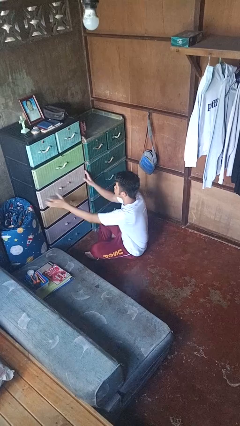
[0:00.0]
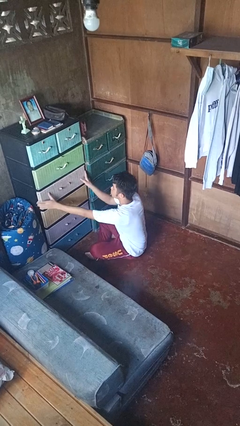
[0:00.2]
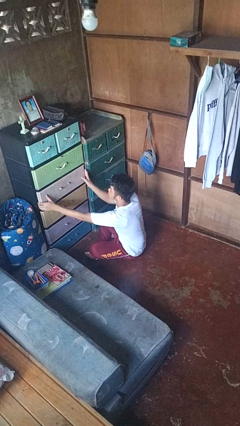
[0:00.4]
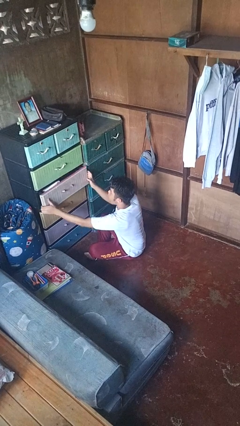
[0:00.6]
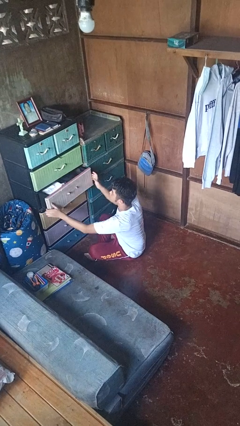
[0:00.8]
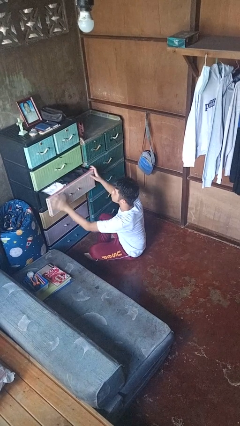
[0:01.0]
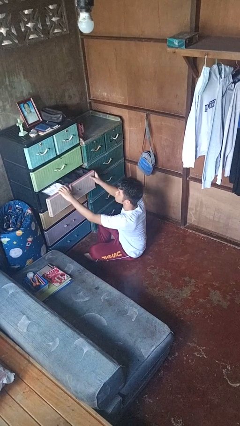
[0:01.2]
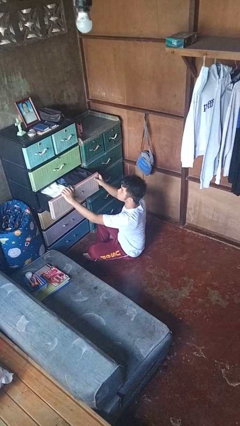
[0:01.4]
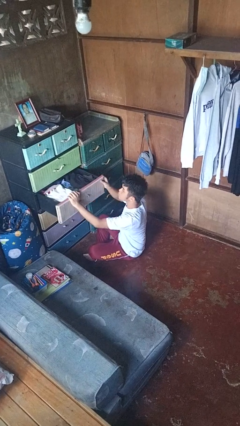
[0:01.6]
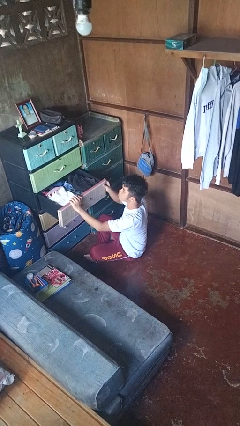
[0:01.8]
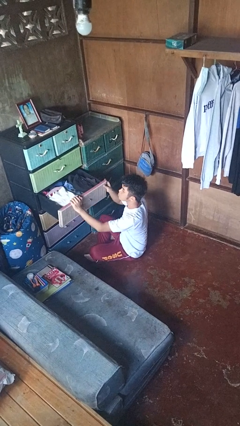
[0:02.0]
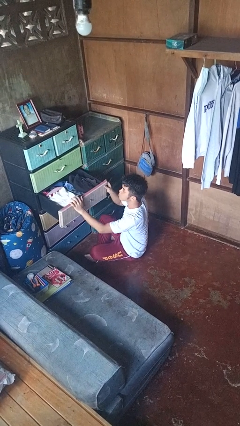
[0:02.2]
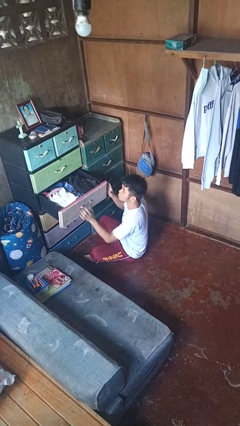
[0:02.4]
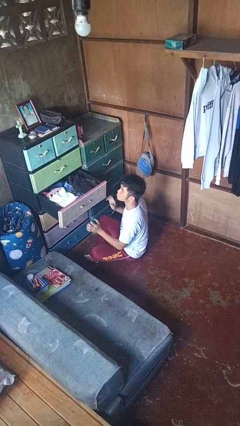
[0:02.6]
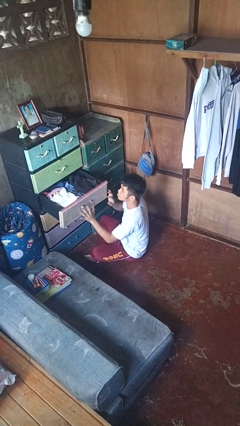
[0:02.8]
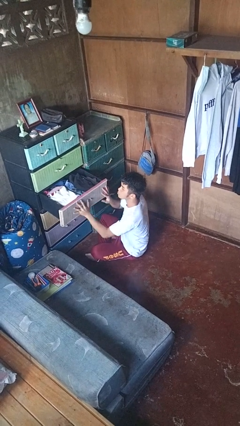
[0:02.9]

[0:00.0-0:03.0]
person opens dresser drawer

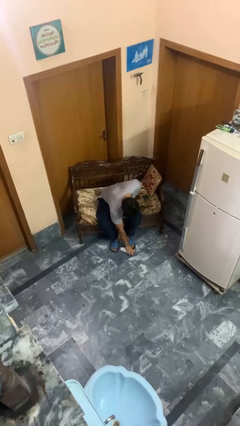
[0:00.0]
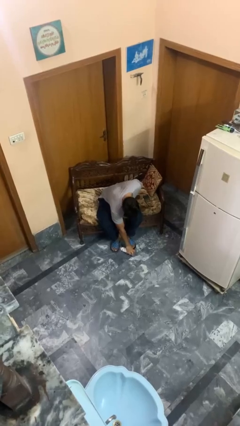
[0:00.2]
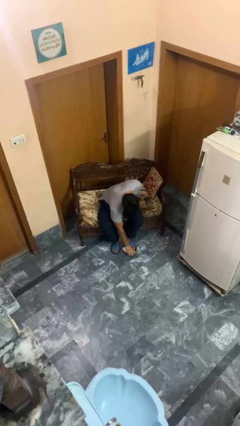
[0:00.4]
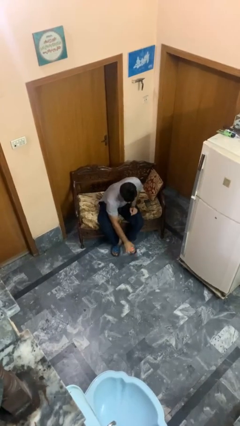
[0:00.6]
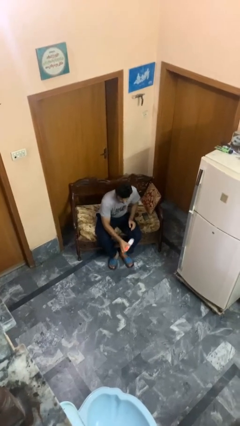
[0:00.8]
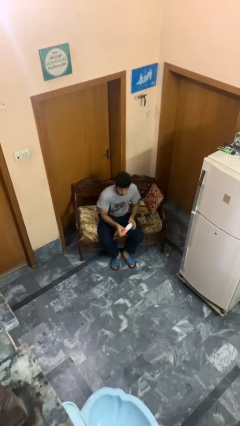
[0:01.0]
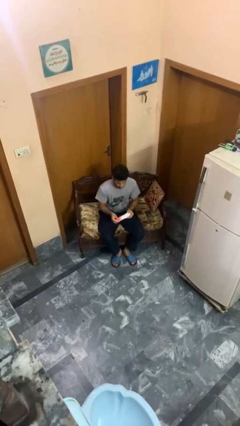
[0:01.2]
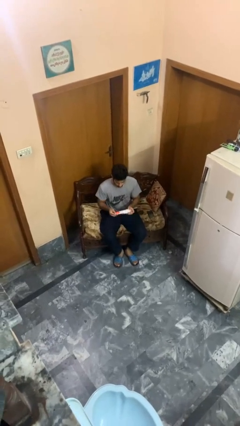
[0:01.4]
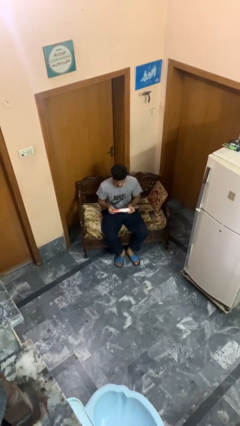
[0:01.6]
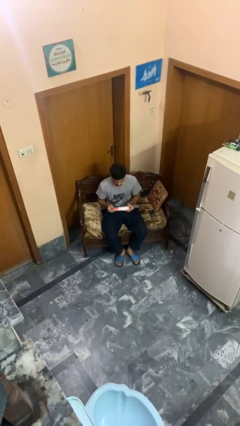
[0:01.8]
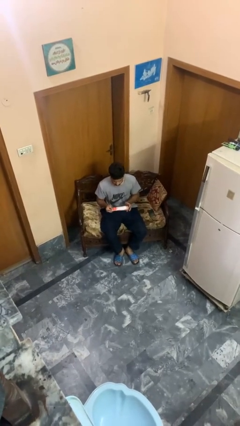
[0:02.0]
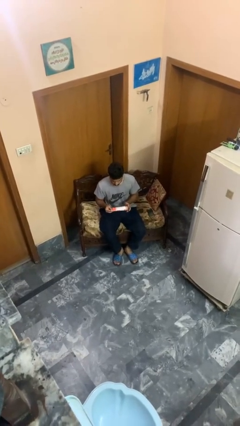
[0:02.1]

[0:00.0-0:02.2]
person picks up object from floor

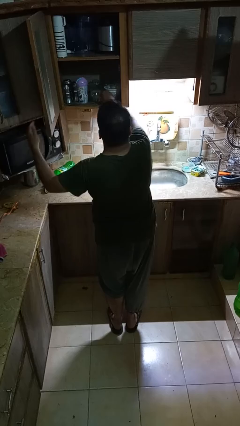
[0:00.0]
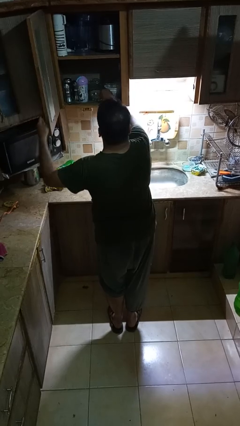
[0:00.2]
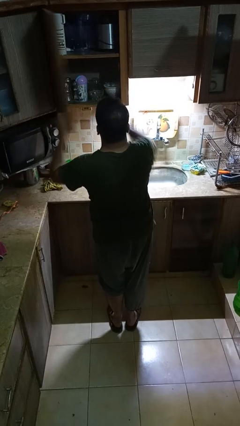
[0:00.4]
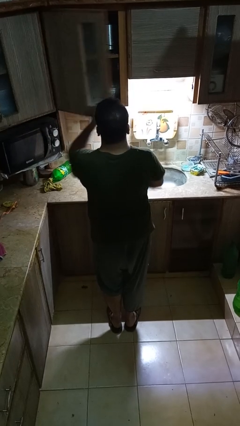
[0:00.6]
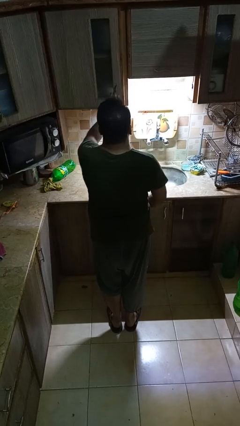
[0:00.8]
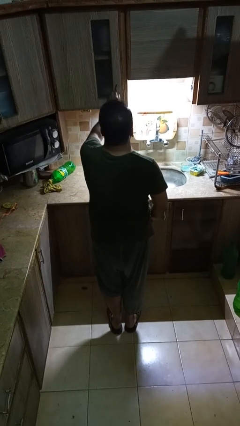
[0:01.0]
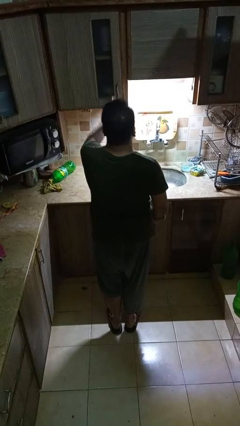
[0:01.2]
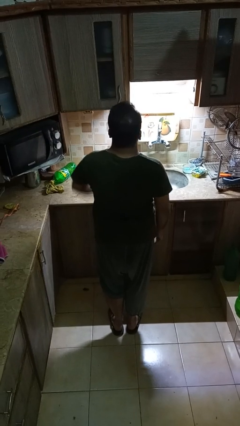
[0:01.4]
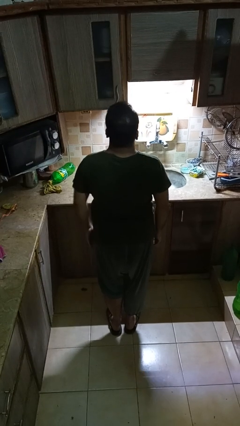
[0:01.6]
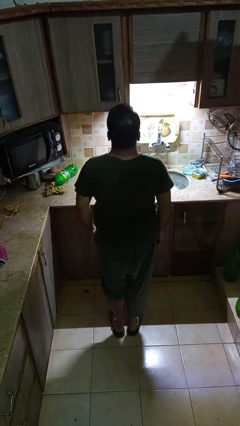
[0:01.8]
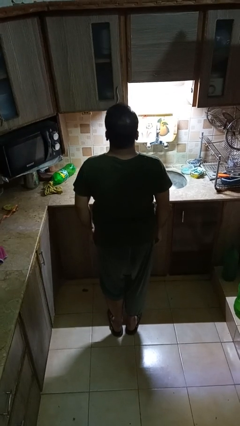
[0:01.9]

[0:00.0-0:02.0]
person puts object in cabinet

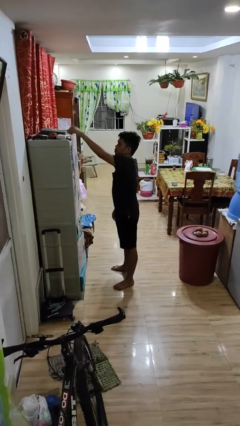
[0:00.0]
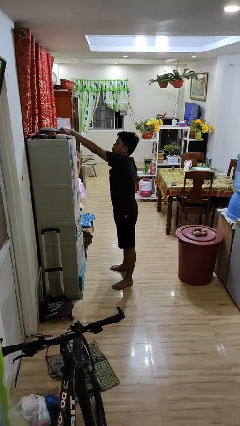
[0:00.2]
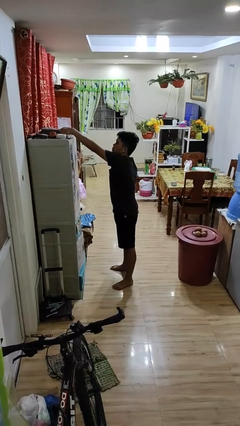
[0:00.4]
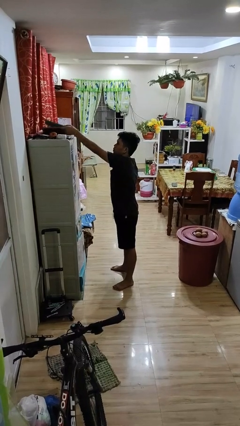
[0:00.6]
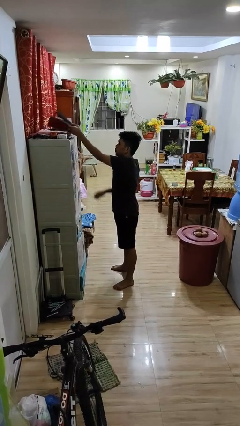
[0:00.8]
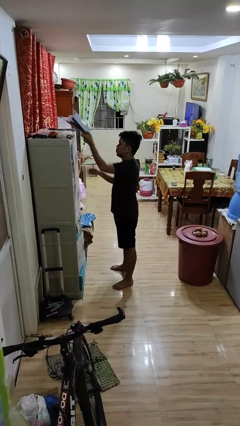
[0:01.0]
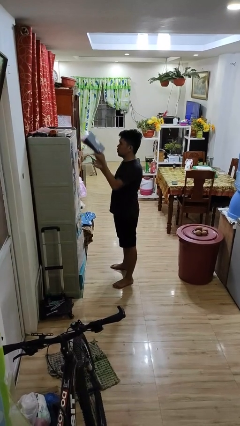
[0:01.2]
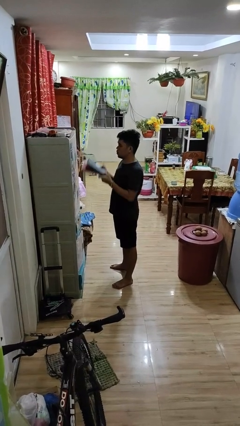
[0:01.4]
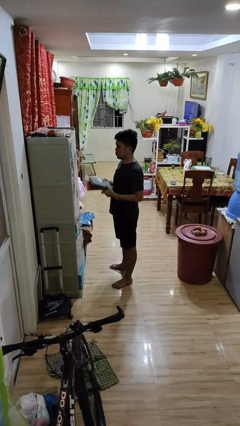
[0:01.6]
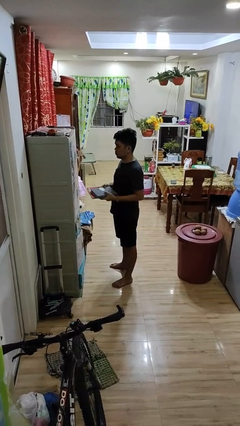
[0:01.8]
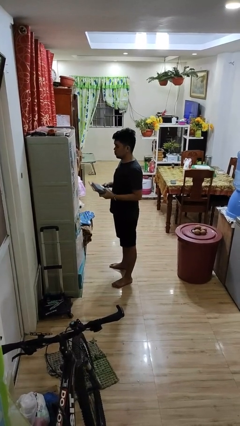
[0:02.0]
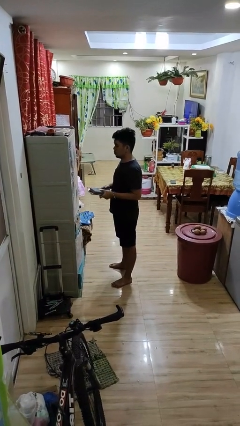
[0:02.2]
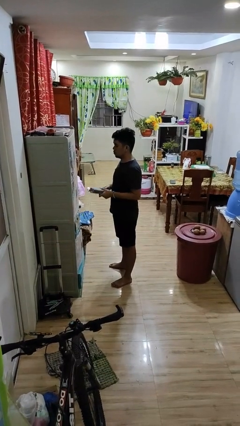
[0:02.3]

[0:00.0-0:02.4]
person picks up object from shelf

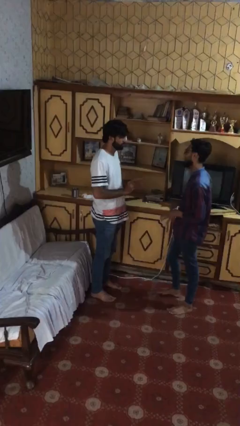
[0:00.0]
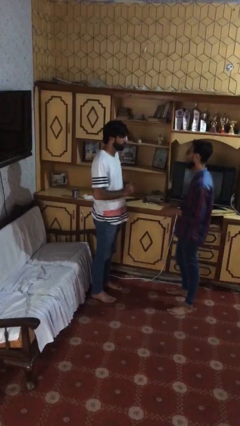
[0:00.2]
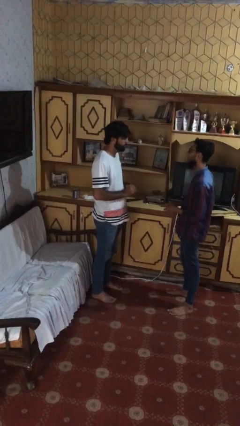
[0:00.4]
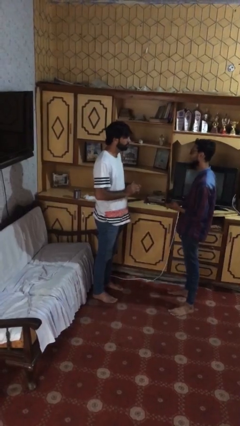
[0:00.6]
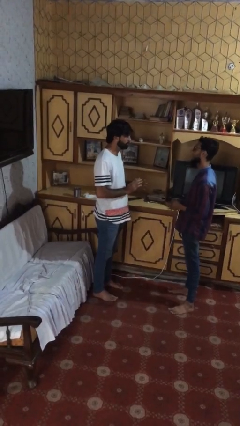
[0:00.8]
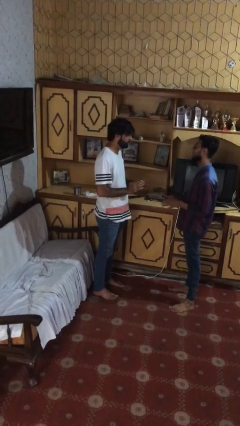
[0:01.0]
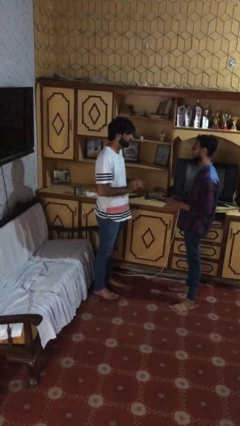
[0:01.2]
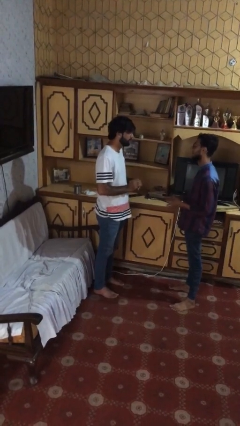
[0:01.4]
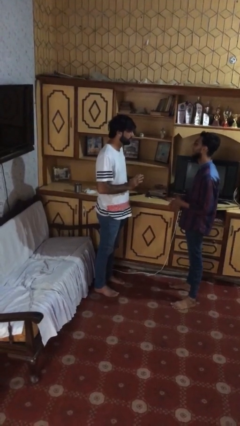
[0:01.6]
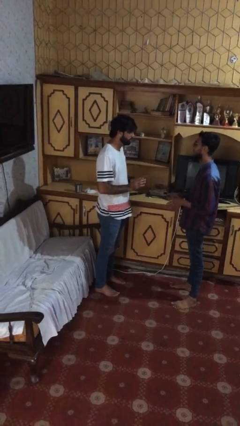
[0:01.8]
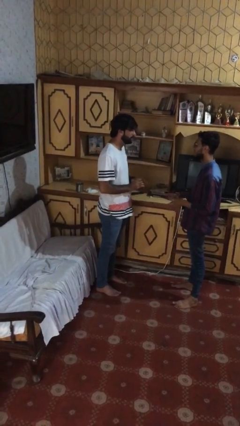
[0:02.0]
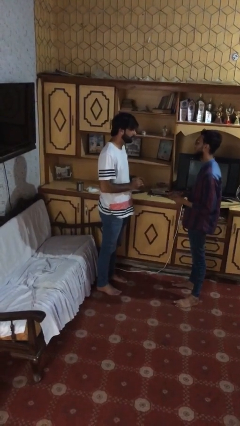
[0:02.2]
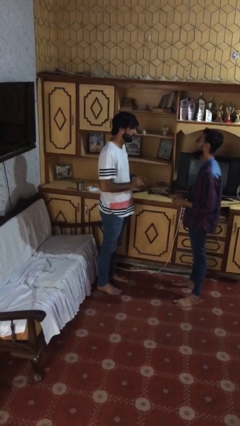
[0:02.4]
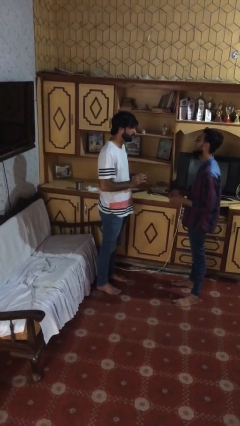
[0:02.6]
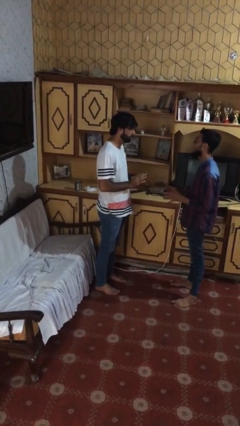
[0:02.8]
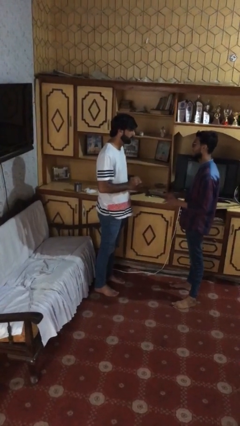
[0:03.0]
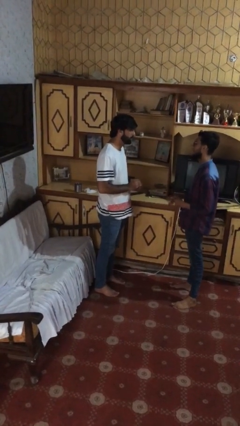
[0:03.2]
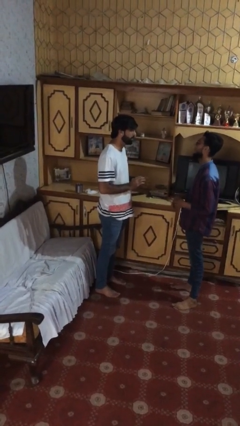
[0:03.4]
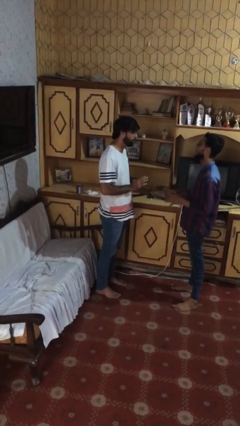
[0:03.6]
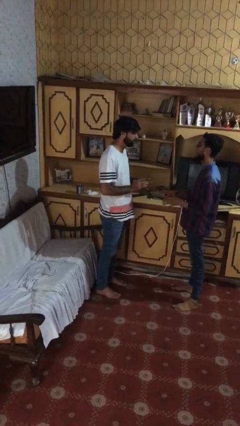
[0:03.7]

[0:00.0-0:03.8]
person talks to person

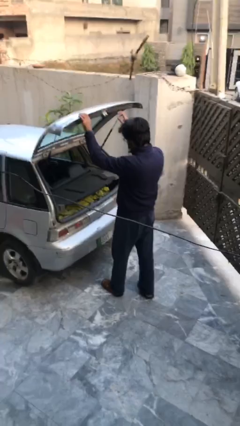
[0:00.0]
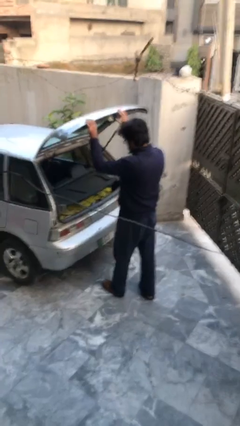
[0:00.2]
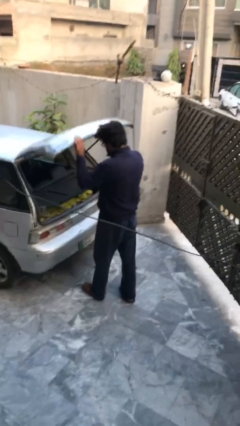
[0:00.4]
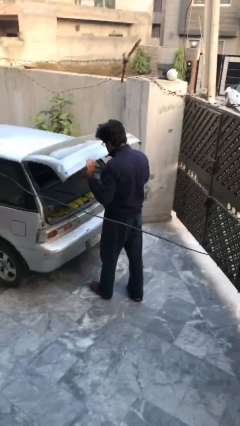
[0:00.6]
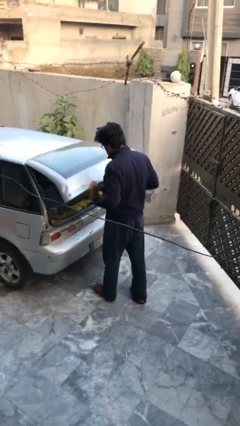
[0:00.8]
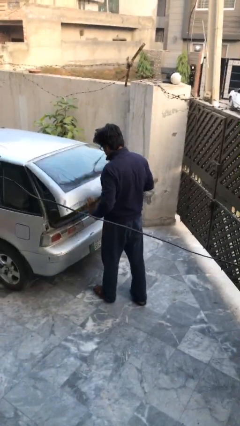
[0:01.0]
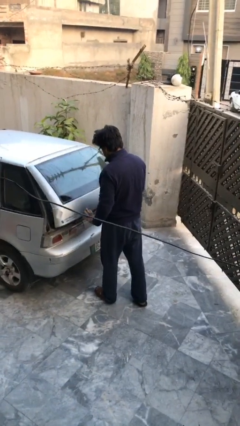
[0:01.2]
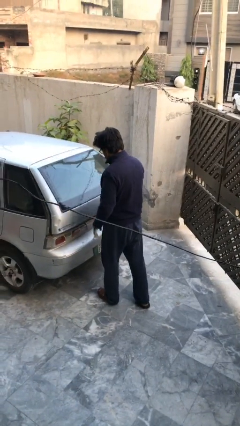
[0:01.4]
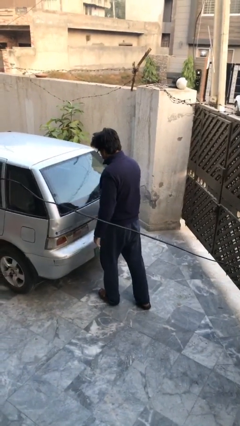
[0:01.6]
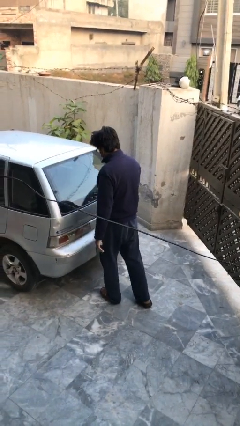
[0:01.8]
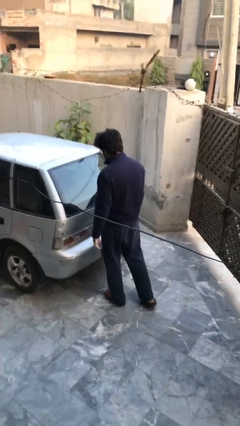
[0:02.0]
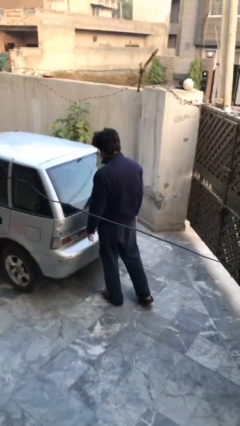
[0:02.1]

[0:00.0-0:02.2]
person closes car trunk

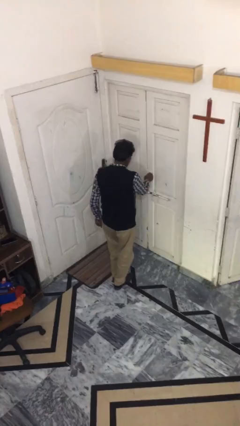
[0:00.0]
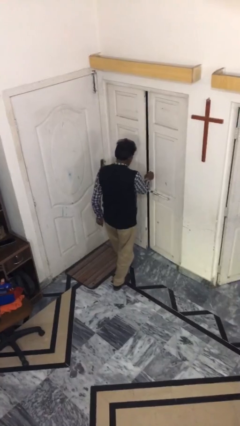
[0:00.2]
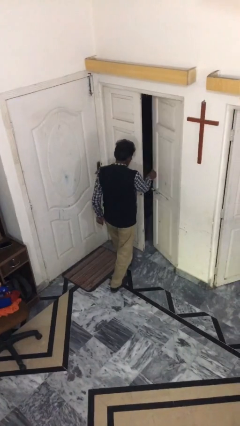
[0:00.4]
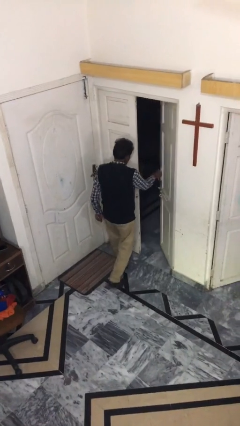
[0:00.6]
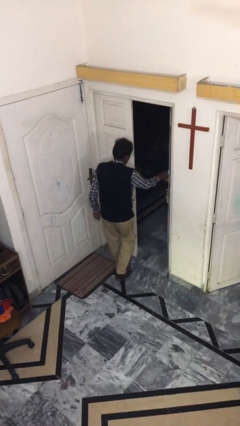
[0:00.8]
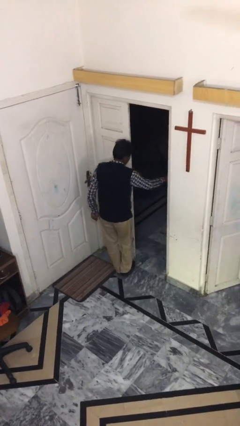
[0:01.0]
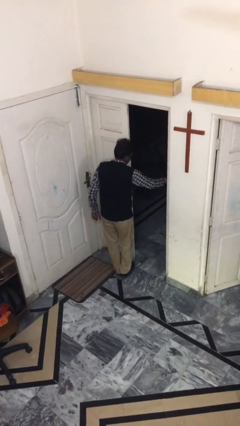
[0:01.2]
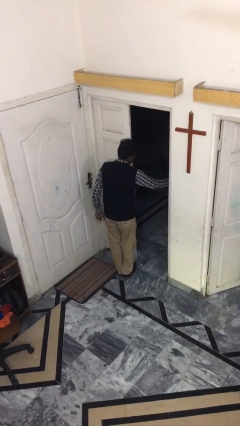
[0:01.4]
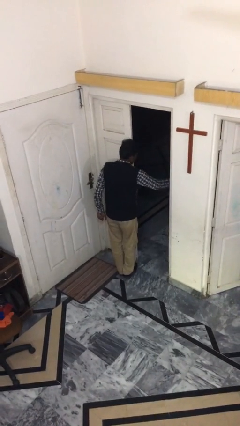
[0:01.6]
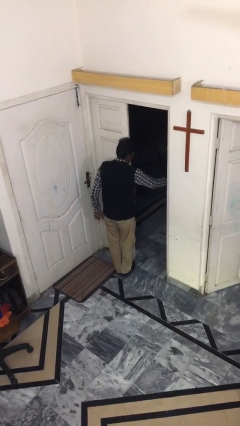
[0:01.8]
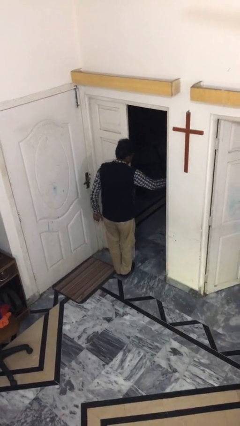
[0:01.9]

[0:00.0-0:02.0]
person opens facility door
